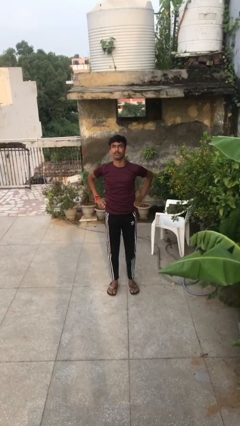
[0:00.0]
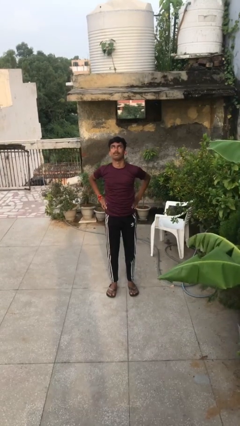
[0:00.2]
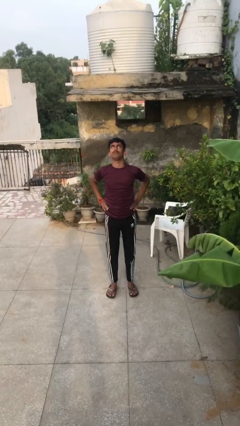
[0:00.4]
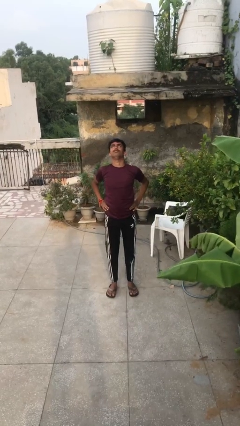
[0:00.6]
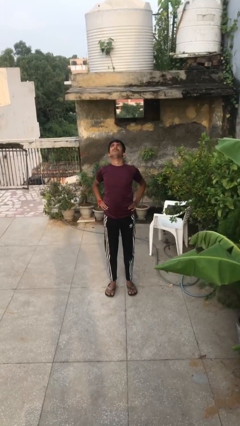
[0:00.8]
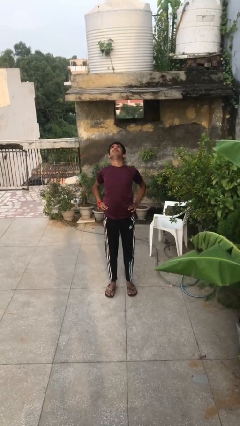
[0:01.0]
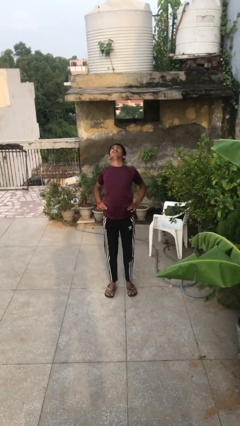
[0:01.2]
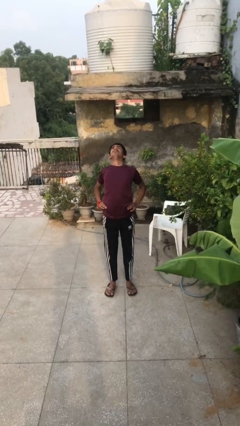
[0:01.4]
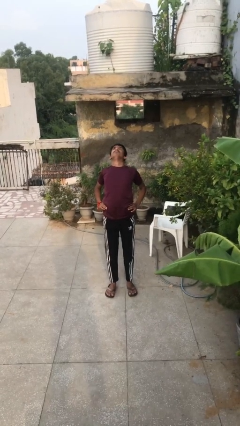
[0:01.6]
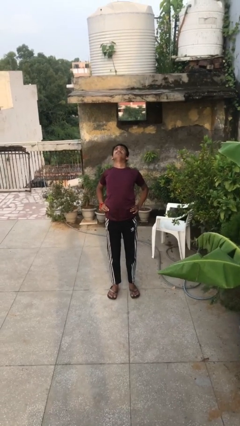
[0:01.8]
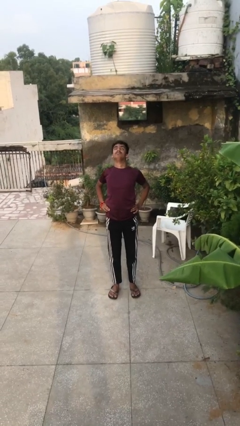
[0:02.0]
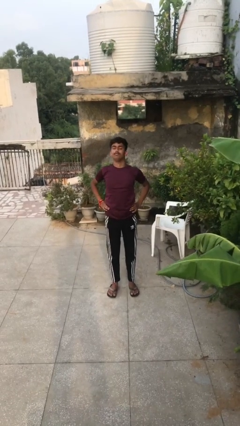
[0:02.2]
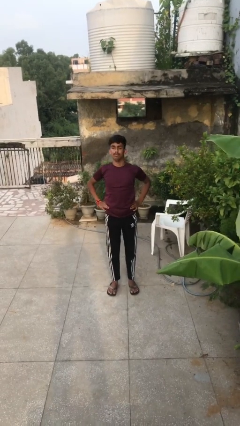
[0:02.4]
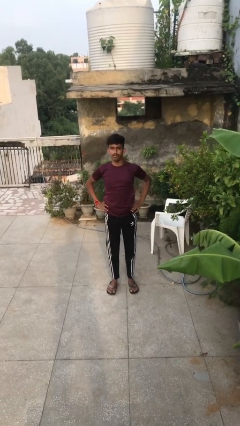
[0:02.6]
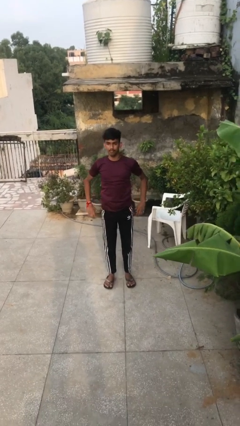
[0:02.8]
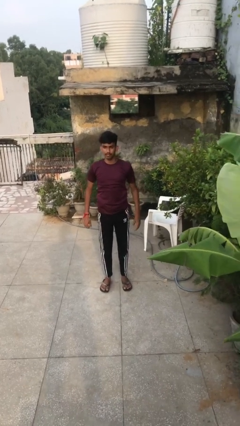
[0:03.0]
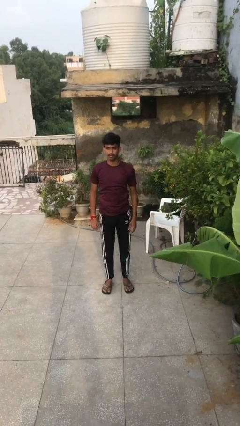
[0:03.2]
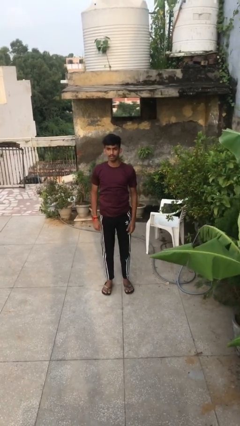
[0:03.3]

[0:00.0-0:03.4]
person stretches back

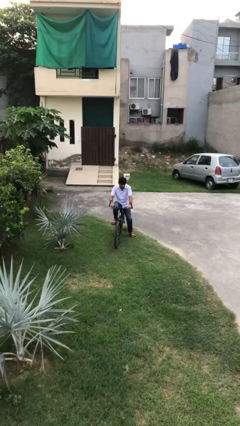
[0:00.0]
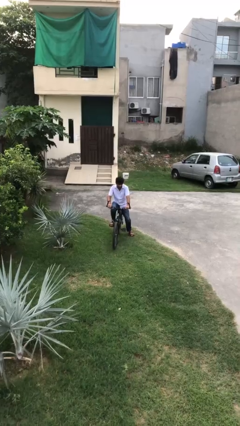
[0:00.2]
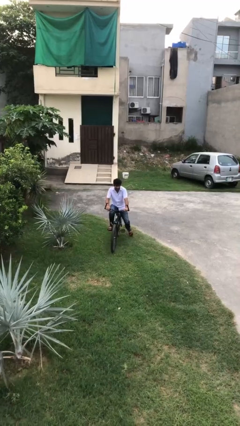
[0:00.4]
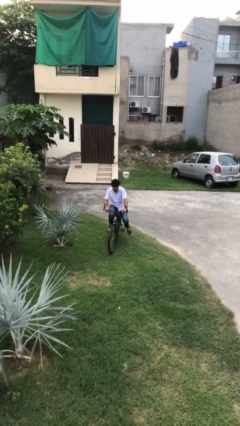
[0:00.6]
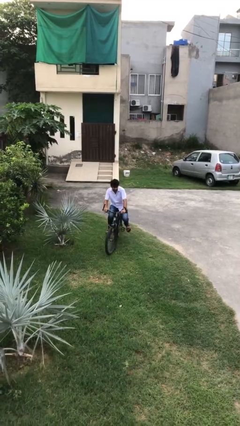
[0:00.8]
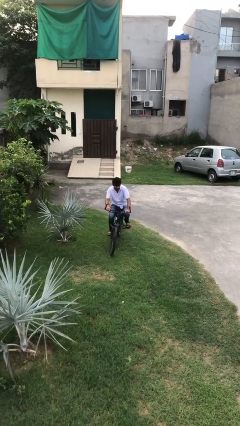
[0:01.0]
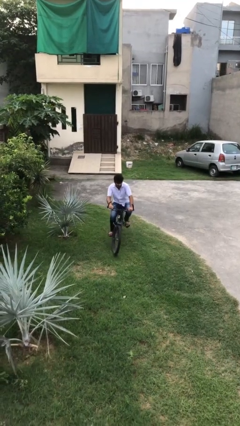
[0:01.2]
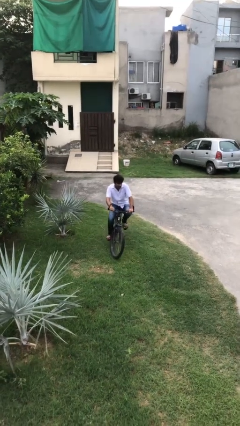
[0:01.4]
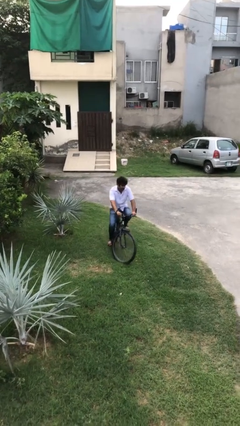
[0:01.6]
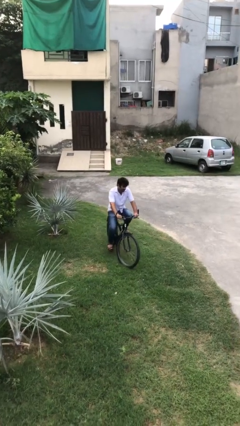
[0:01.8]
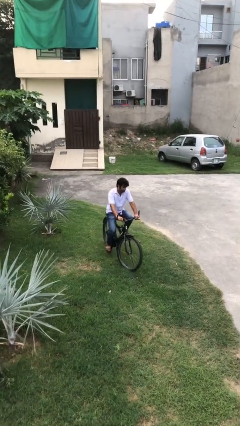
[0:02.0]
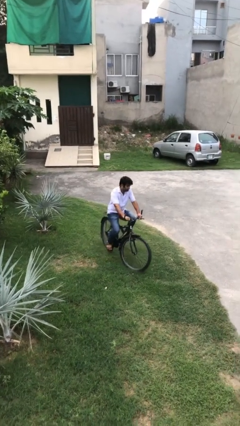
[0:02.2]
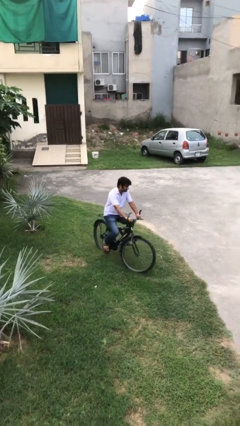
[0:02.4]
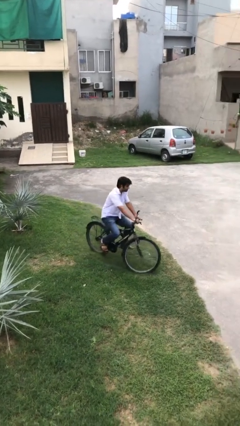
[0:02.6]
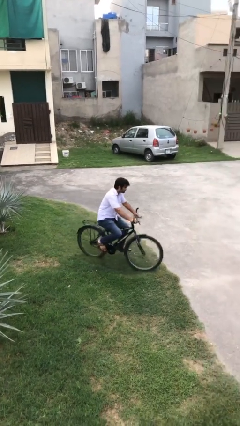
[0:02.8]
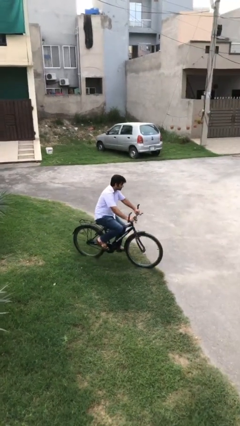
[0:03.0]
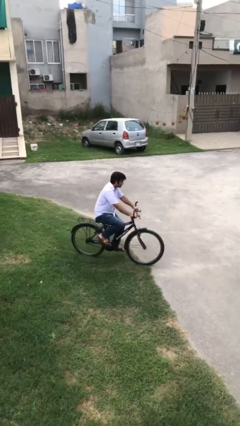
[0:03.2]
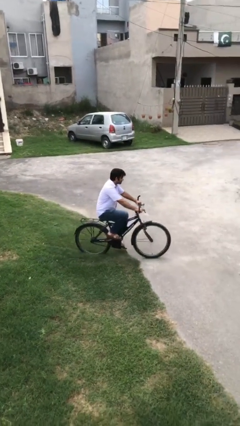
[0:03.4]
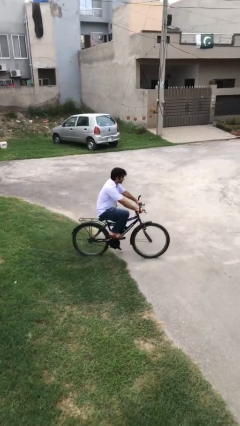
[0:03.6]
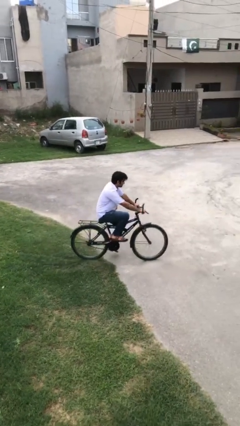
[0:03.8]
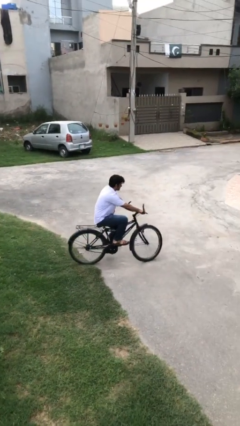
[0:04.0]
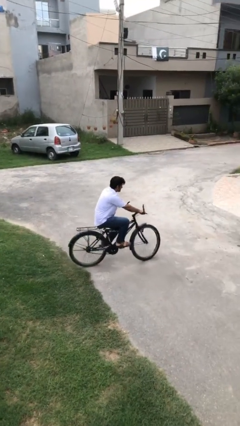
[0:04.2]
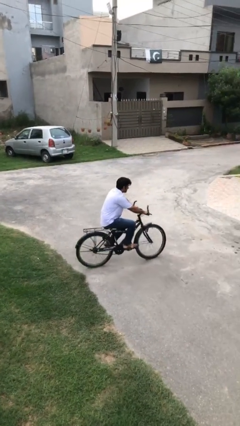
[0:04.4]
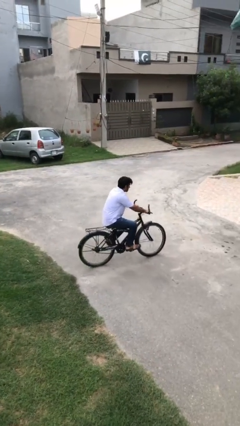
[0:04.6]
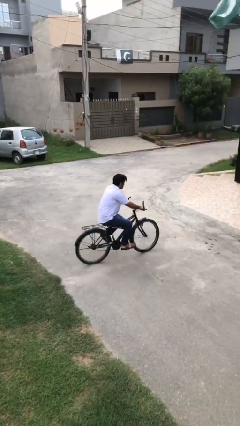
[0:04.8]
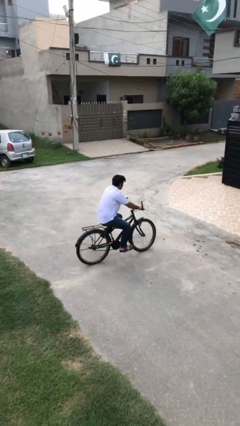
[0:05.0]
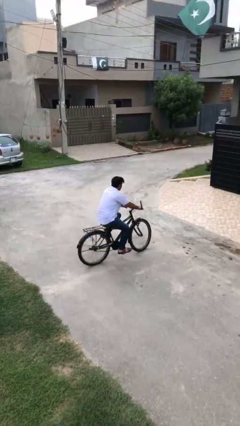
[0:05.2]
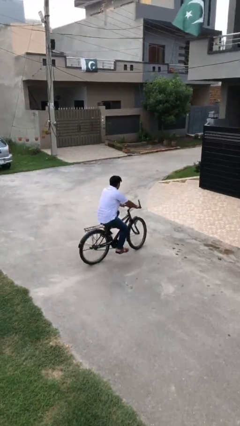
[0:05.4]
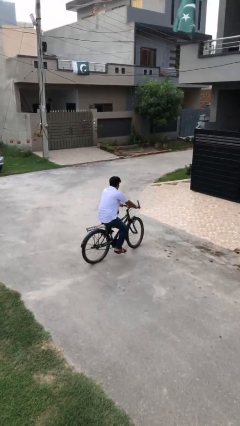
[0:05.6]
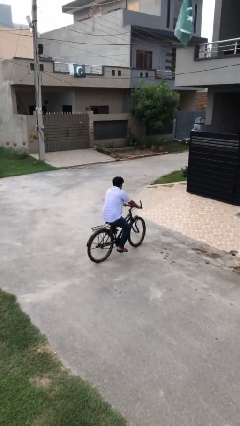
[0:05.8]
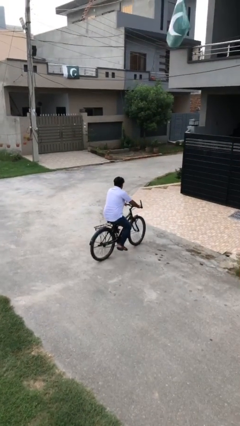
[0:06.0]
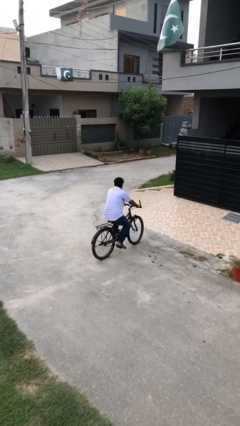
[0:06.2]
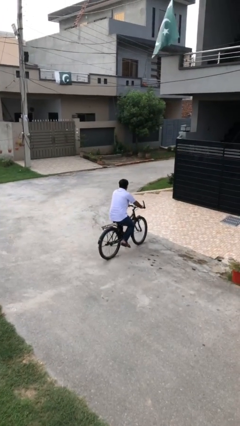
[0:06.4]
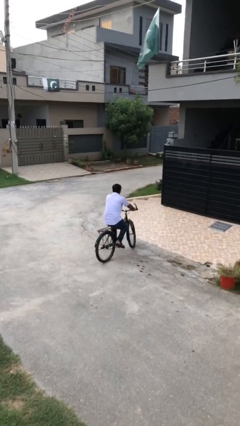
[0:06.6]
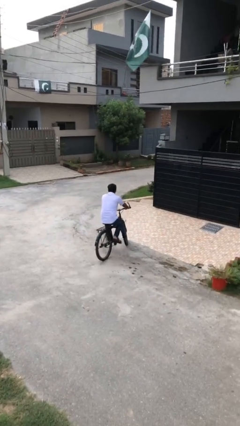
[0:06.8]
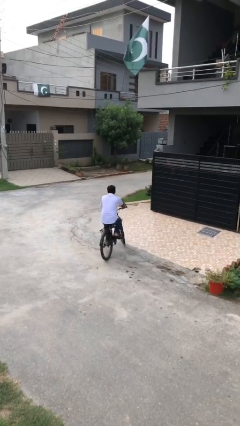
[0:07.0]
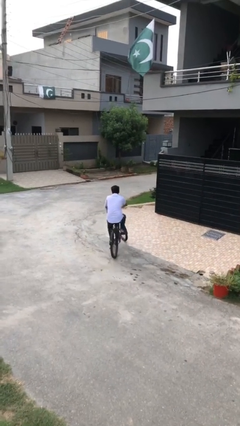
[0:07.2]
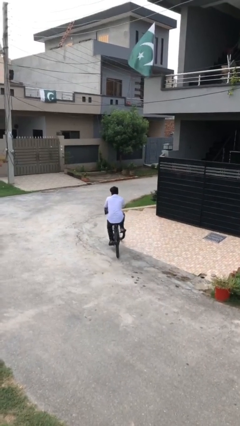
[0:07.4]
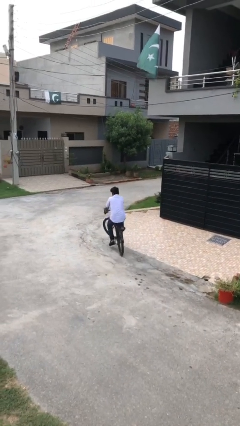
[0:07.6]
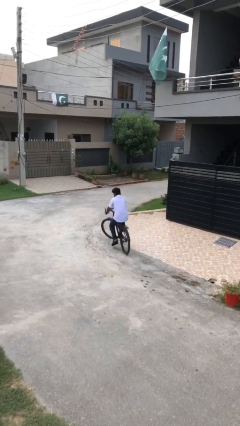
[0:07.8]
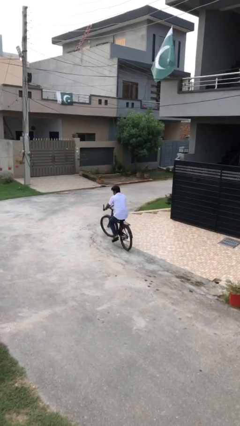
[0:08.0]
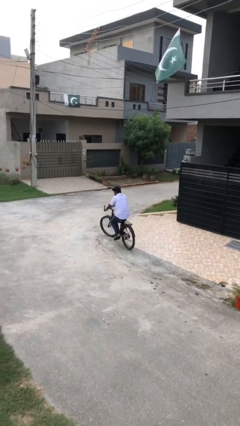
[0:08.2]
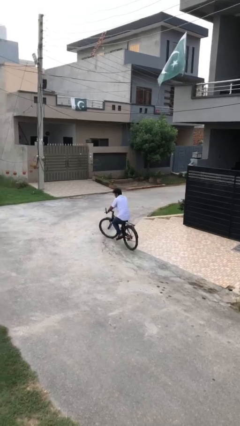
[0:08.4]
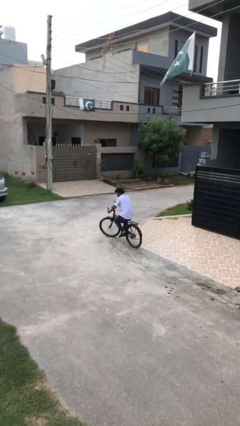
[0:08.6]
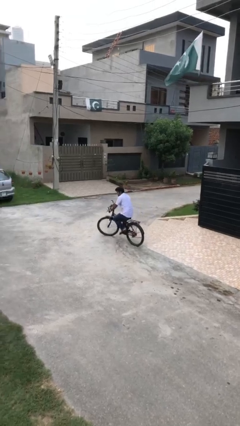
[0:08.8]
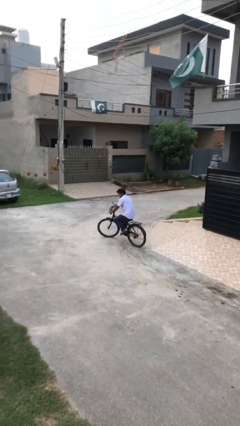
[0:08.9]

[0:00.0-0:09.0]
person rides bicycle

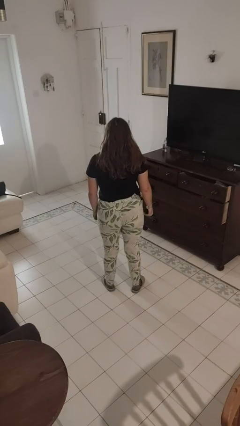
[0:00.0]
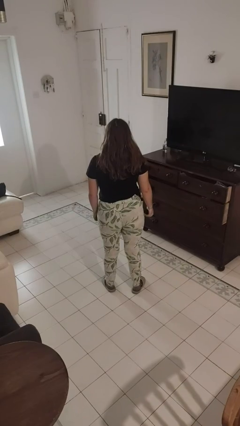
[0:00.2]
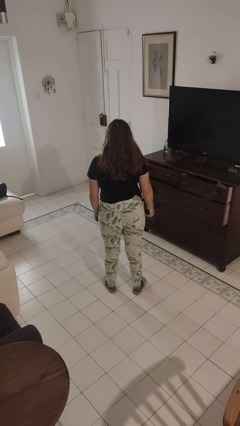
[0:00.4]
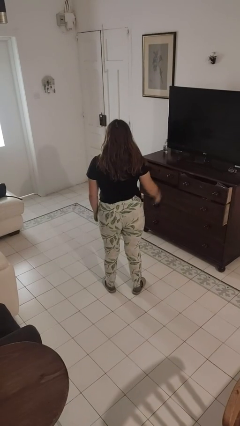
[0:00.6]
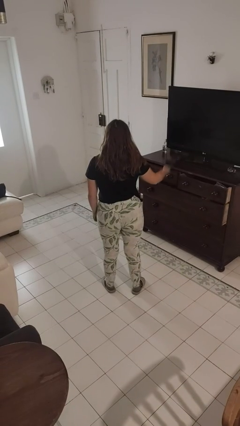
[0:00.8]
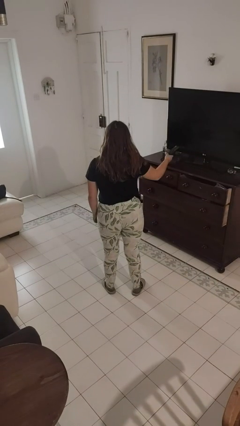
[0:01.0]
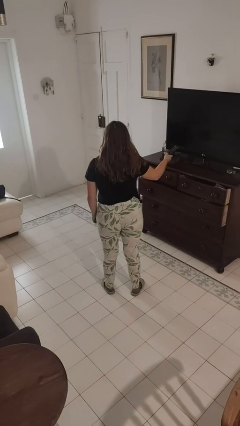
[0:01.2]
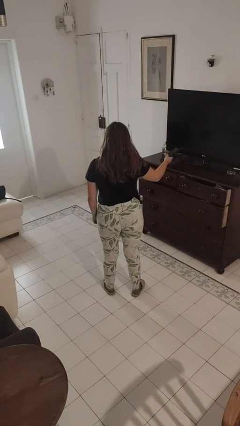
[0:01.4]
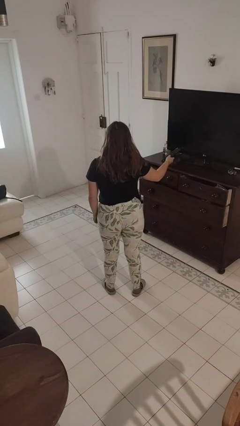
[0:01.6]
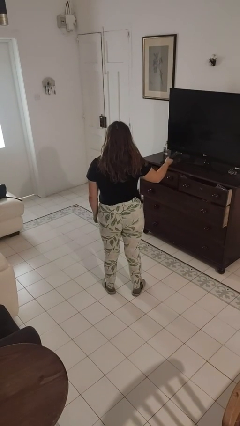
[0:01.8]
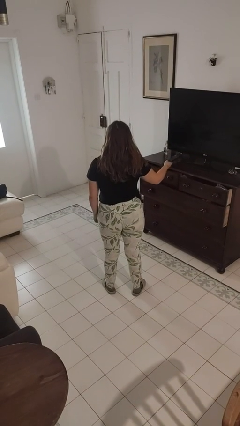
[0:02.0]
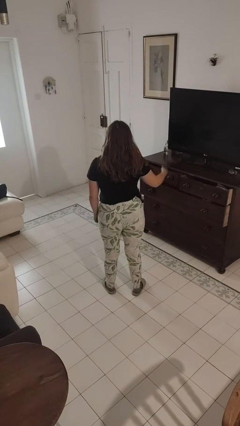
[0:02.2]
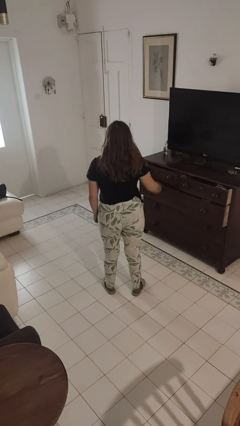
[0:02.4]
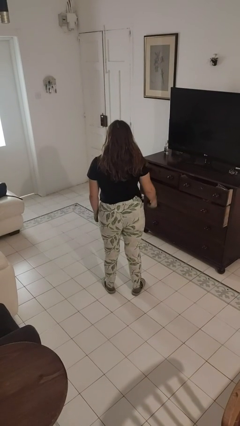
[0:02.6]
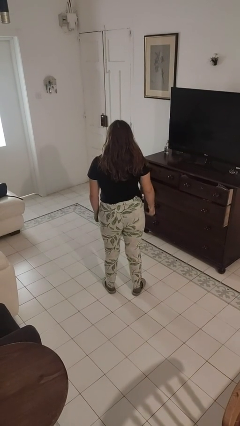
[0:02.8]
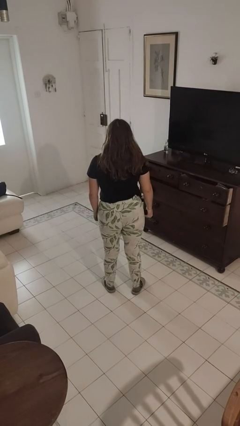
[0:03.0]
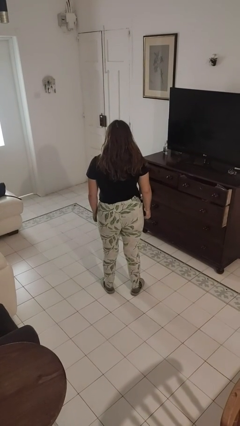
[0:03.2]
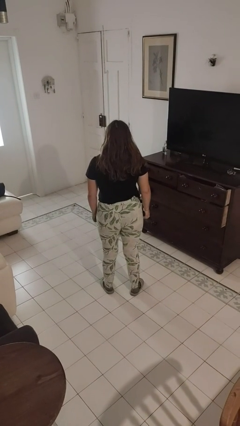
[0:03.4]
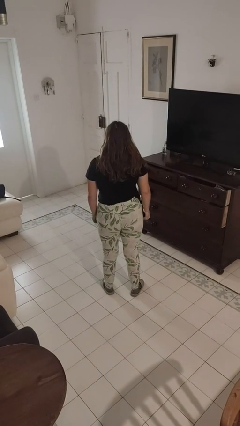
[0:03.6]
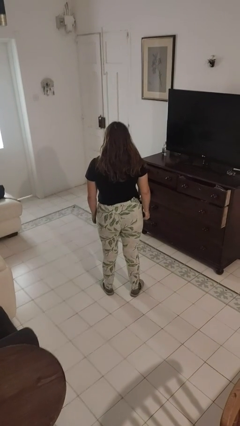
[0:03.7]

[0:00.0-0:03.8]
person uses television remote

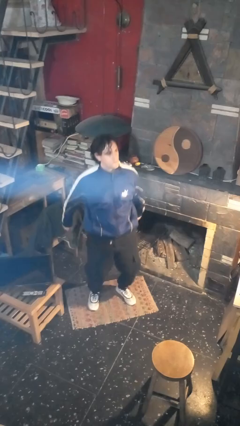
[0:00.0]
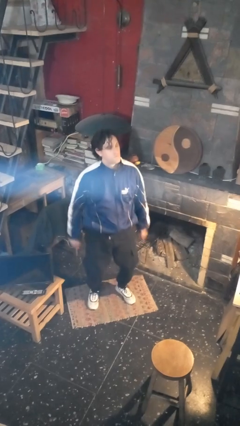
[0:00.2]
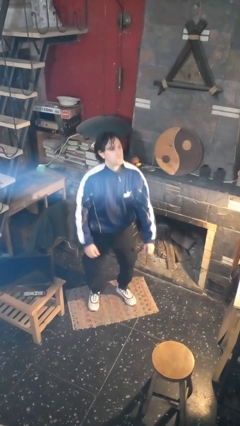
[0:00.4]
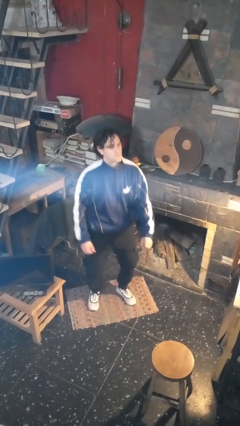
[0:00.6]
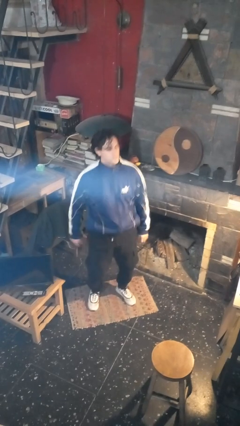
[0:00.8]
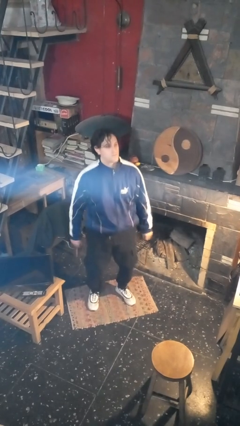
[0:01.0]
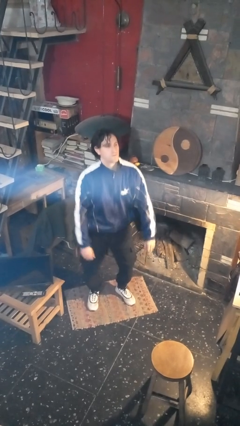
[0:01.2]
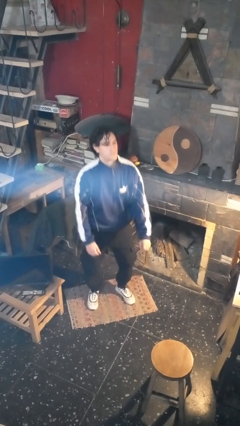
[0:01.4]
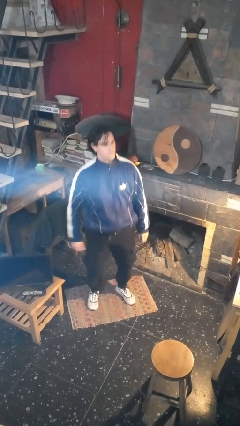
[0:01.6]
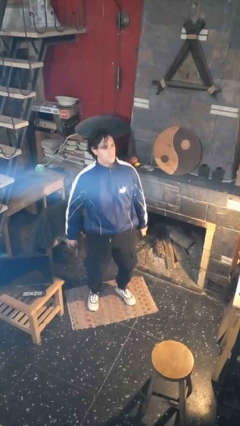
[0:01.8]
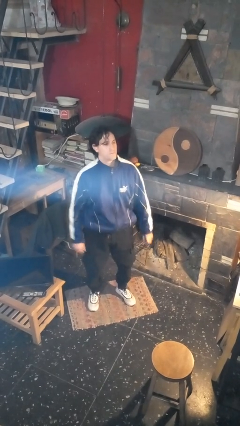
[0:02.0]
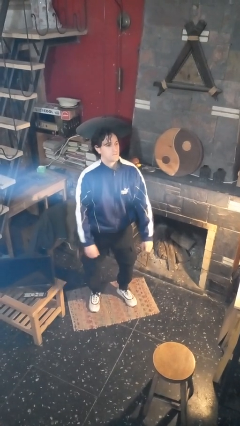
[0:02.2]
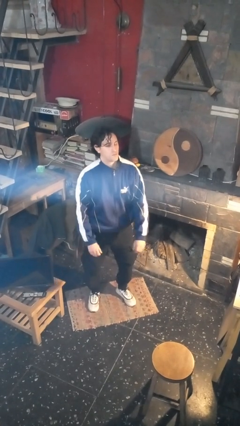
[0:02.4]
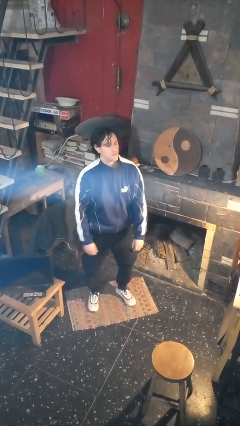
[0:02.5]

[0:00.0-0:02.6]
person wiggles hips
